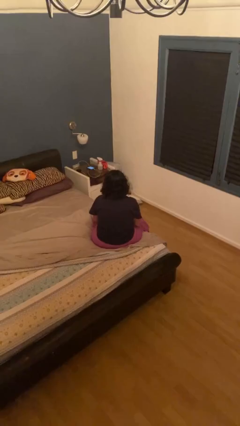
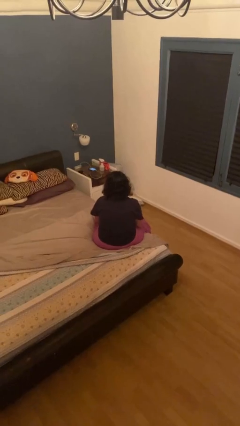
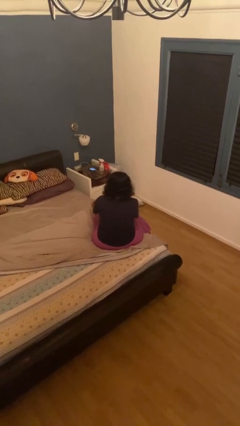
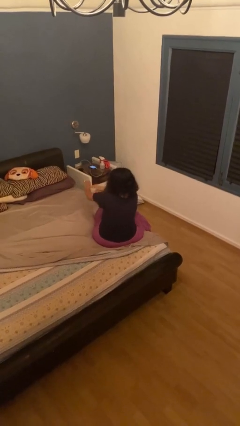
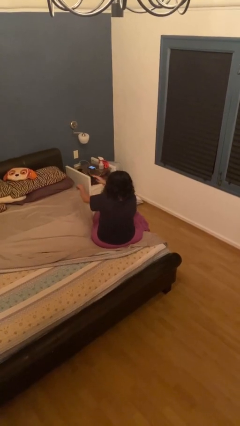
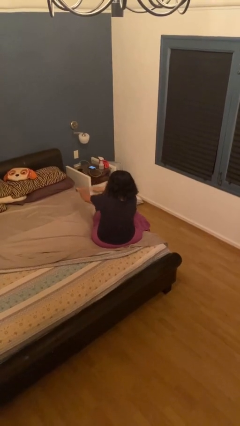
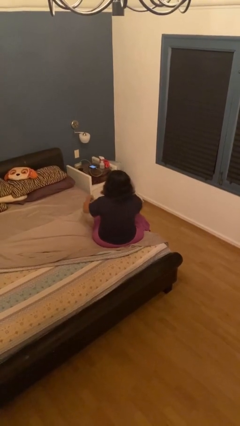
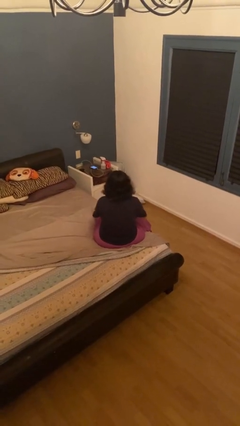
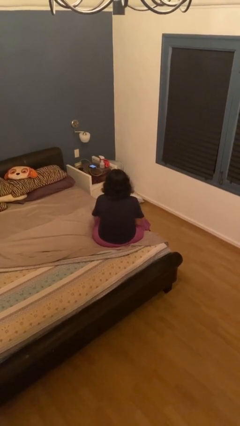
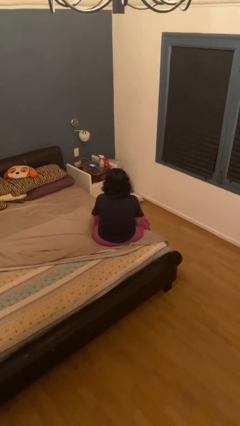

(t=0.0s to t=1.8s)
person swats bug

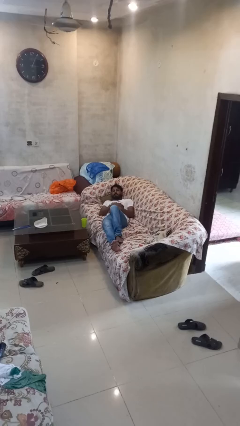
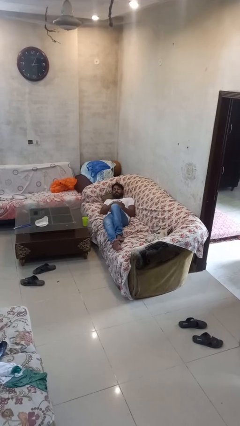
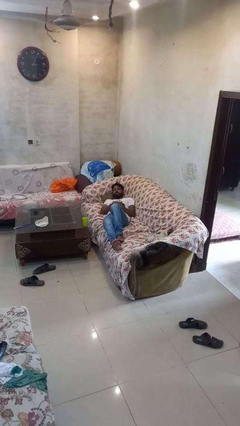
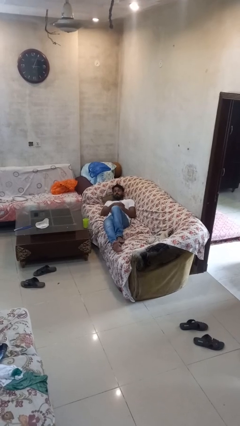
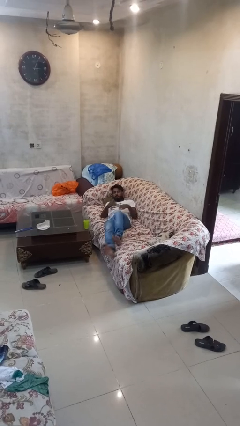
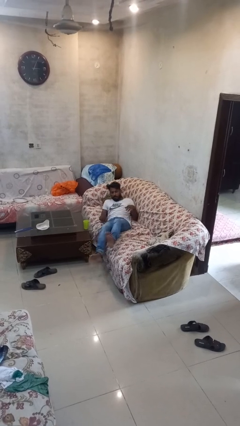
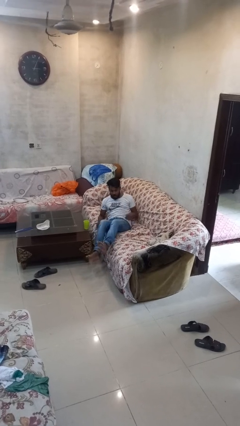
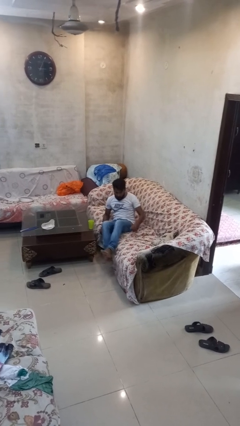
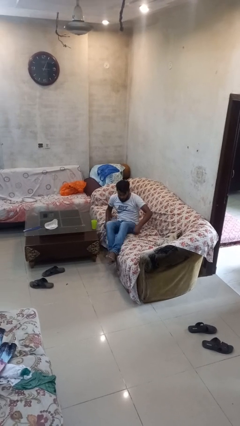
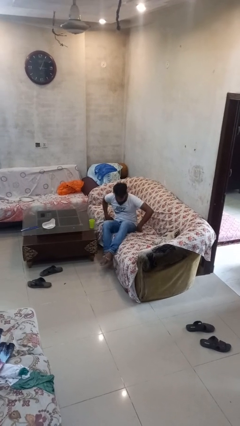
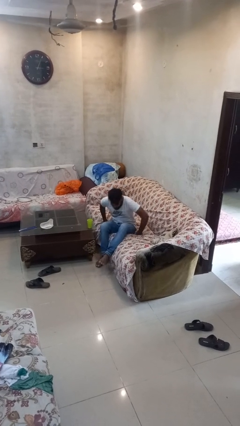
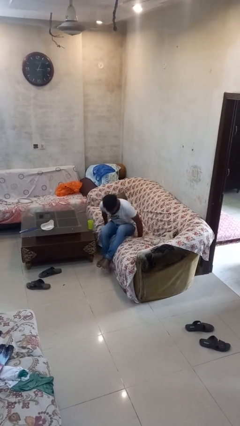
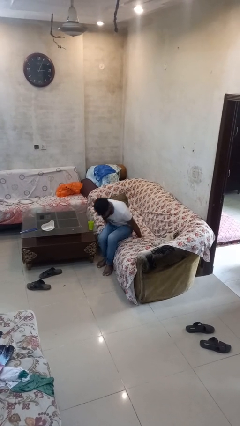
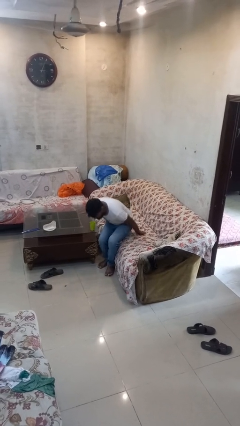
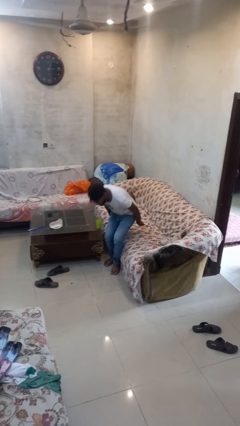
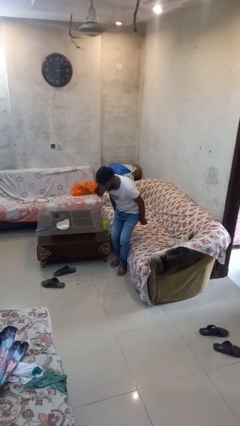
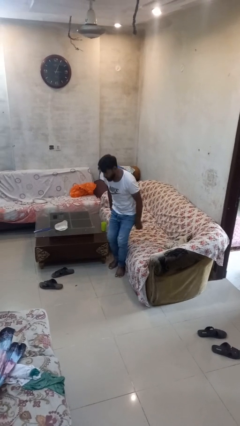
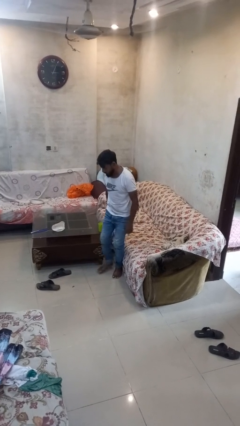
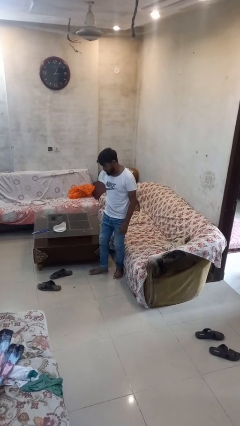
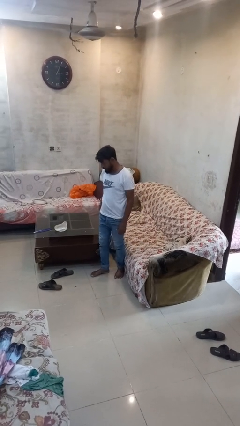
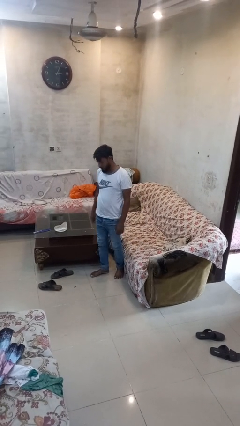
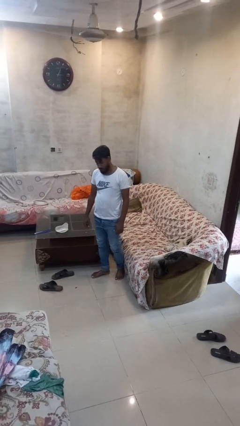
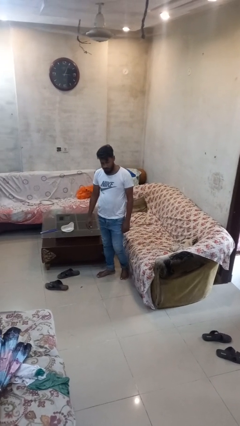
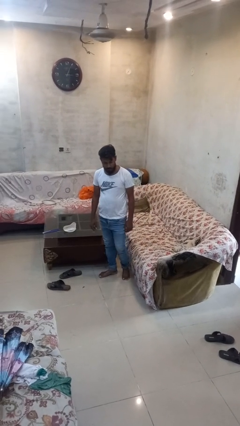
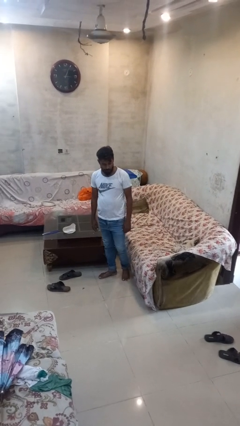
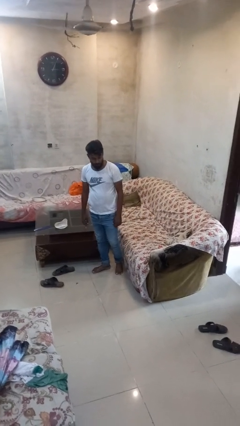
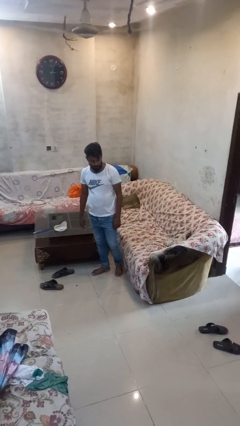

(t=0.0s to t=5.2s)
person stands up

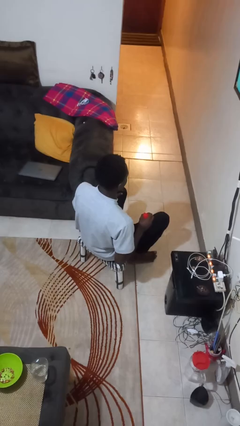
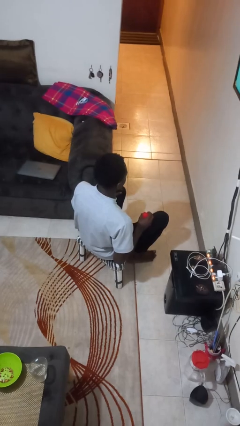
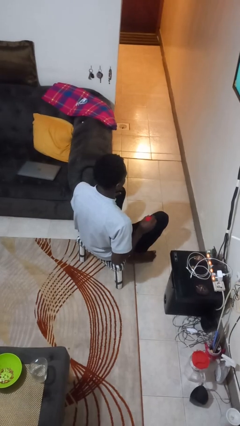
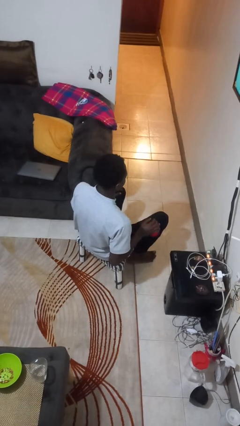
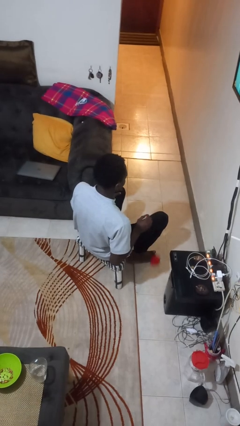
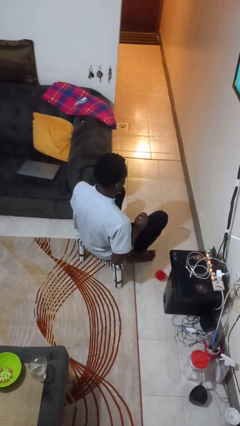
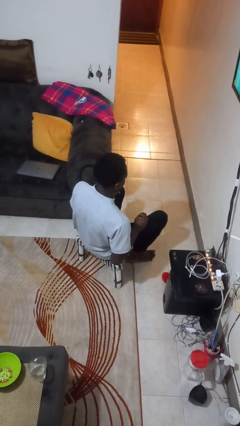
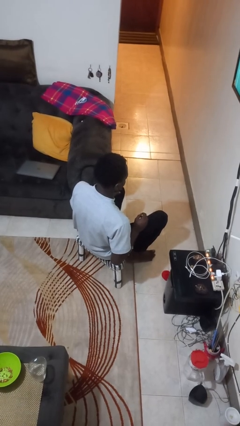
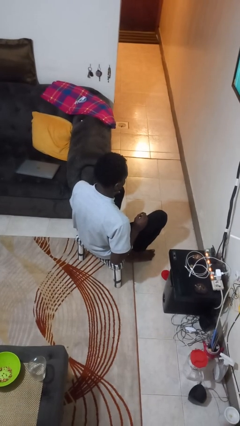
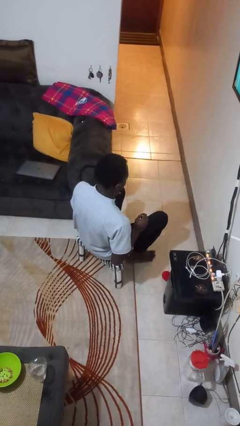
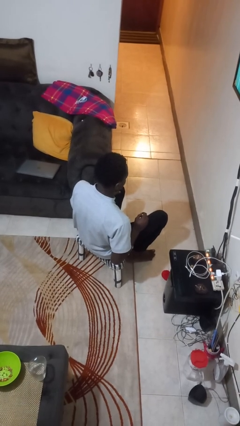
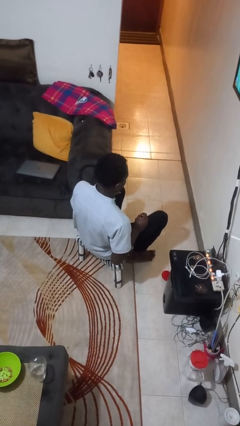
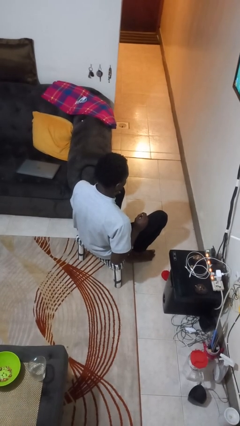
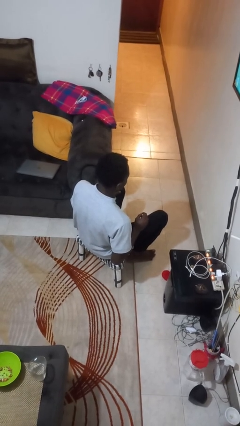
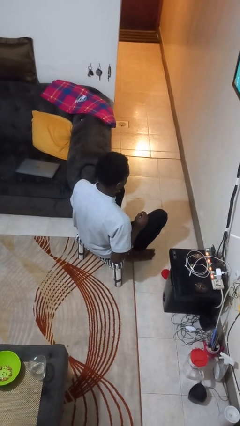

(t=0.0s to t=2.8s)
person drops object

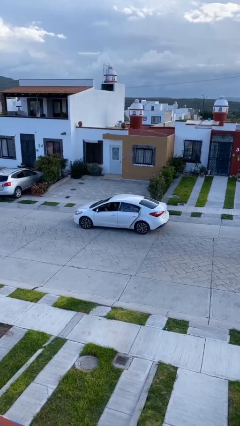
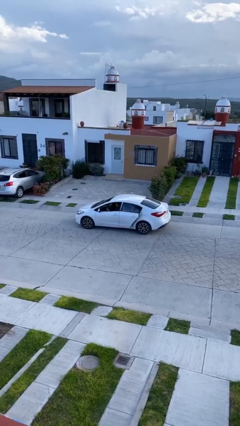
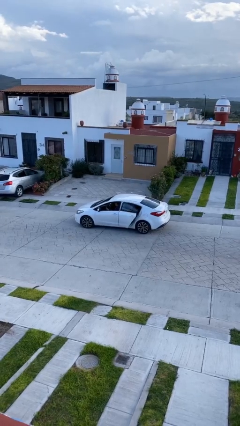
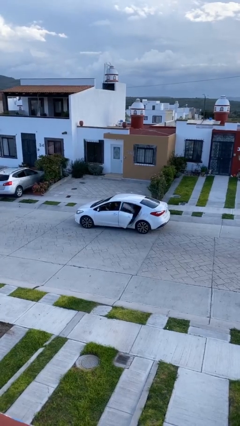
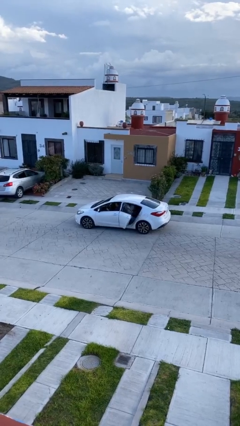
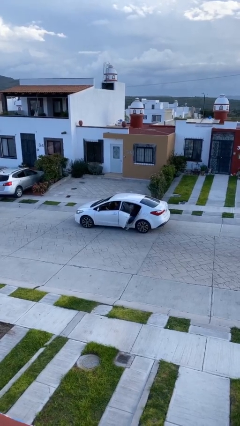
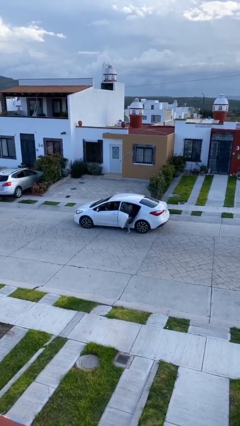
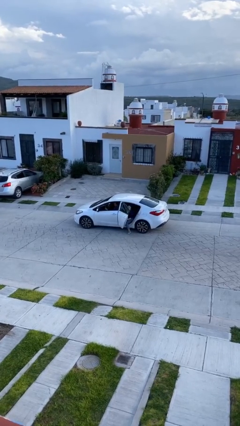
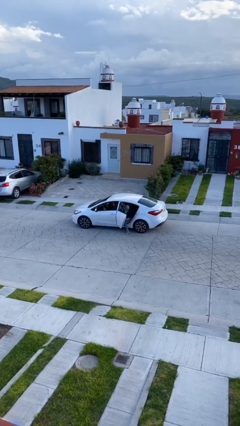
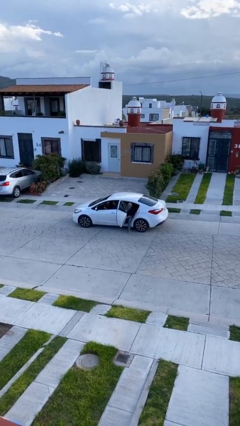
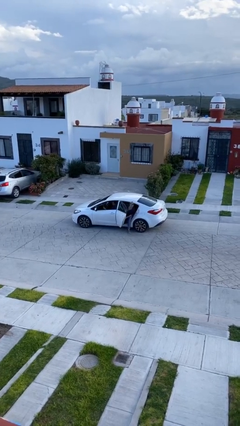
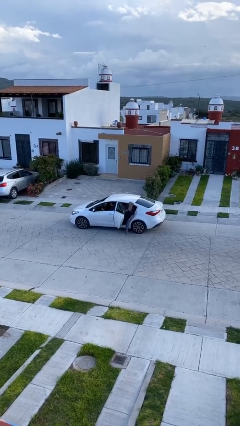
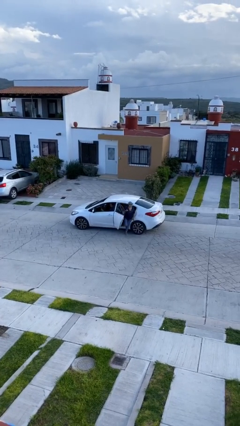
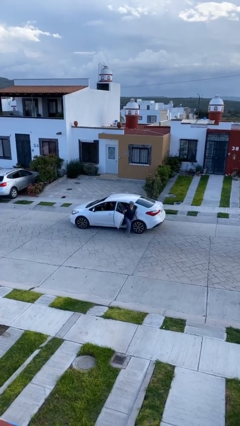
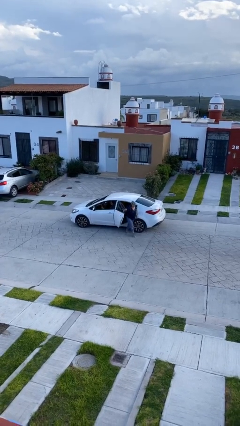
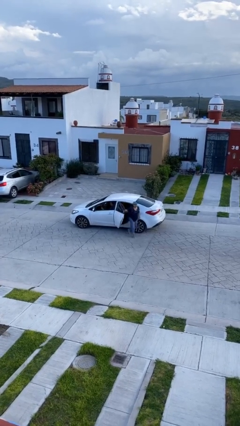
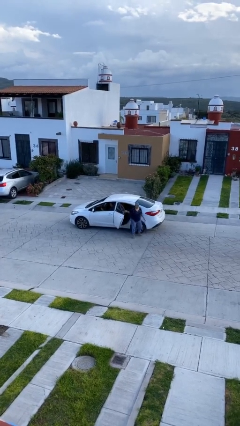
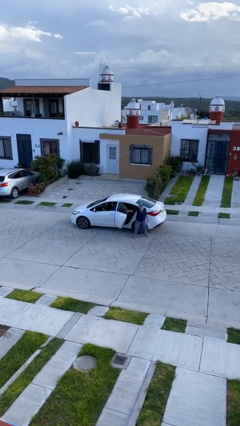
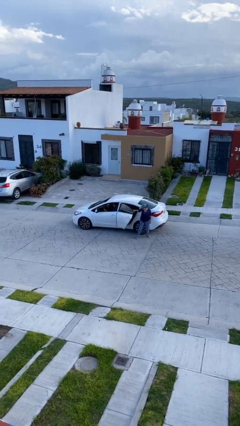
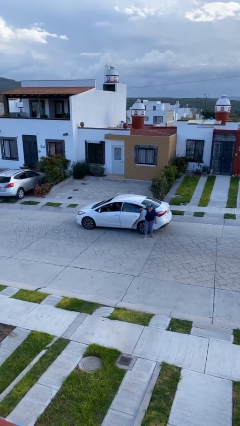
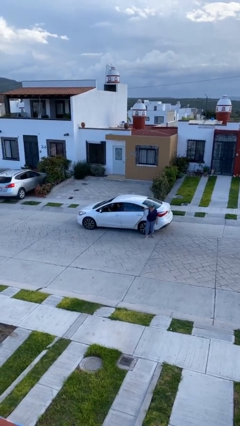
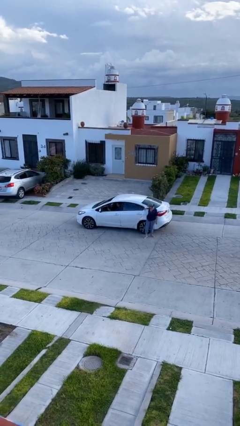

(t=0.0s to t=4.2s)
car drops off person

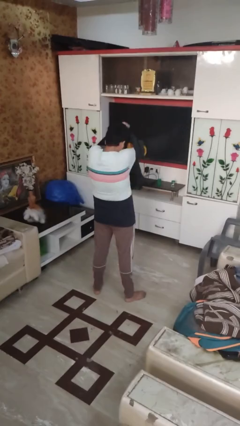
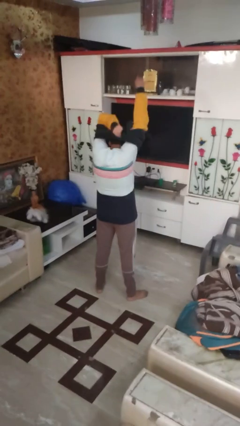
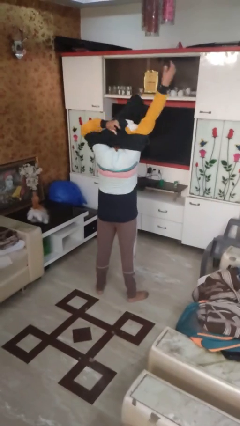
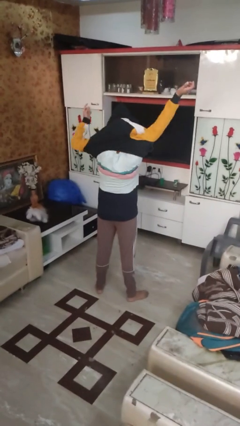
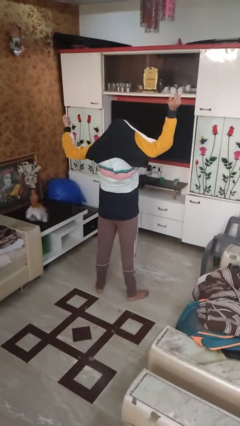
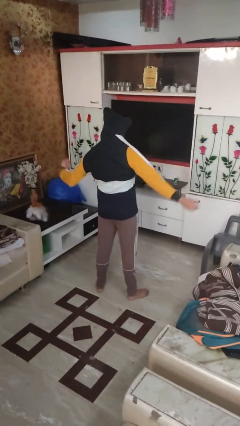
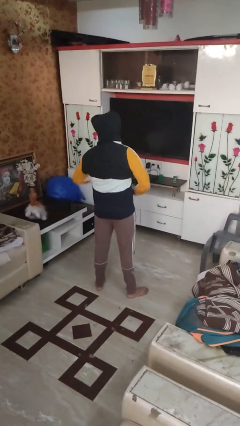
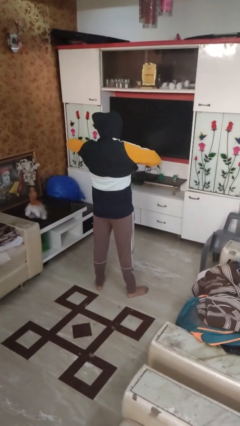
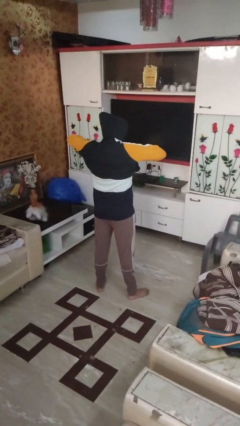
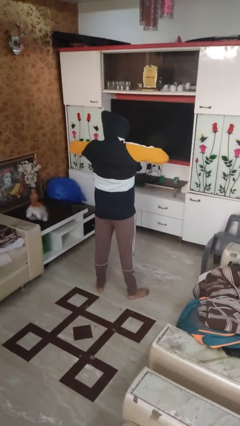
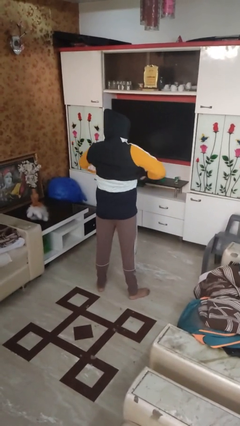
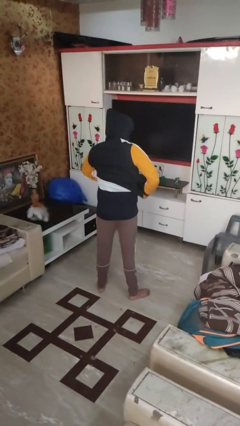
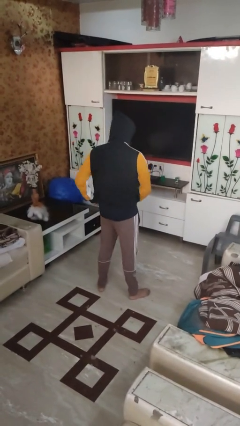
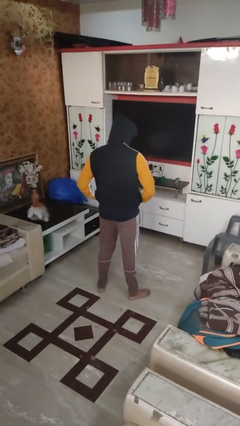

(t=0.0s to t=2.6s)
person puts on hoodie

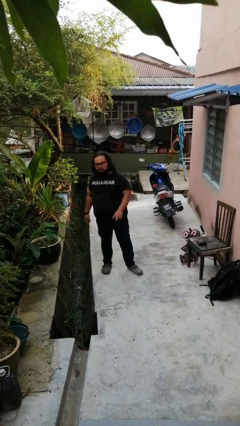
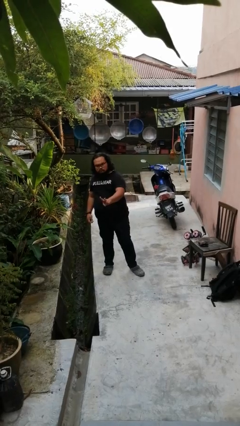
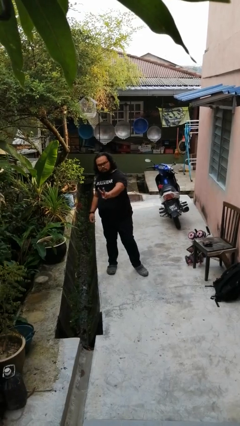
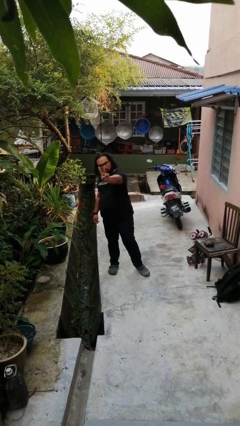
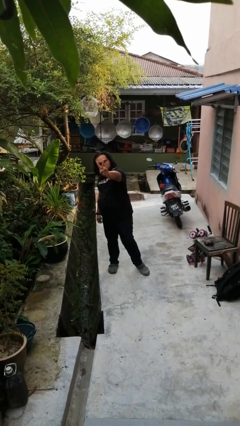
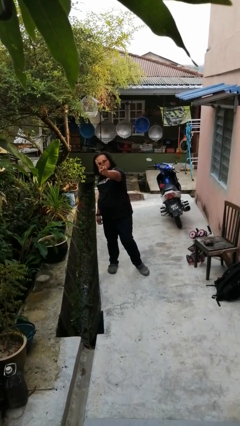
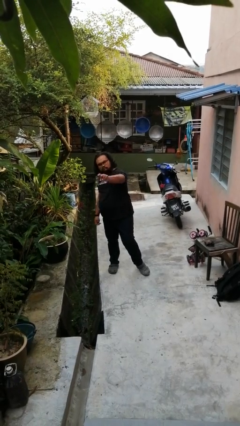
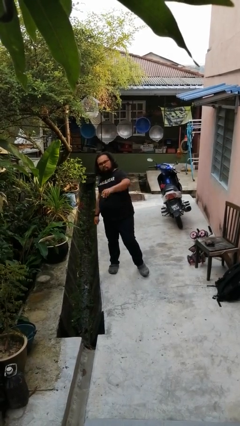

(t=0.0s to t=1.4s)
person gestures peace
